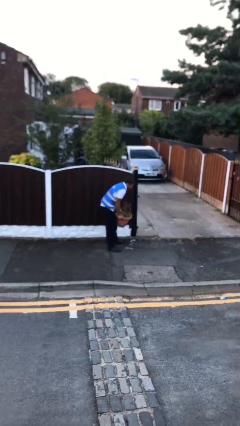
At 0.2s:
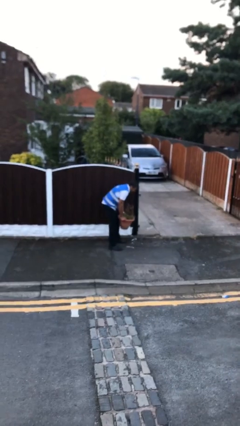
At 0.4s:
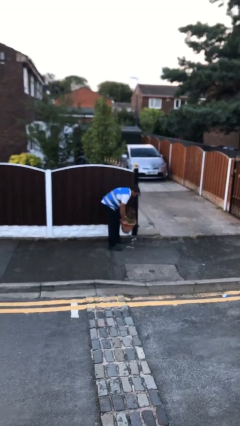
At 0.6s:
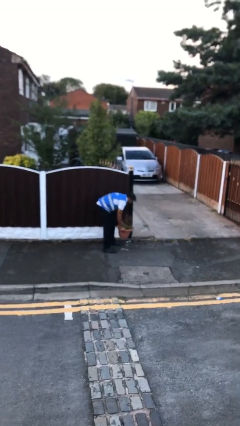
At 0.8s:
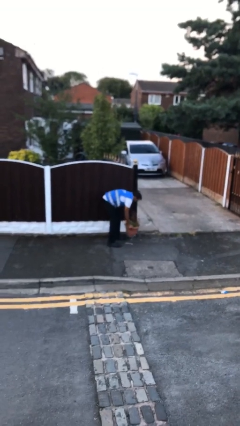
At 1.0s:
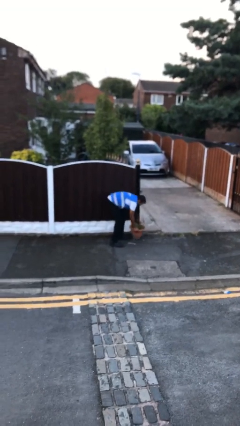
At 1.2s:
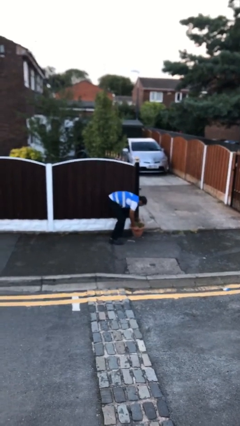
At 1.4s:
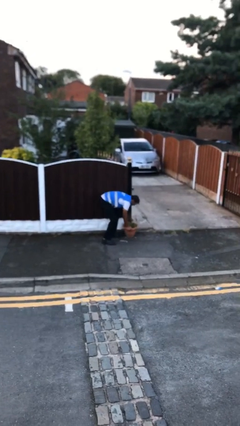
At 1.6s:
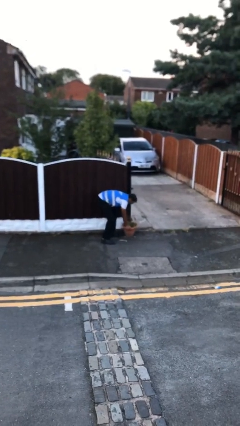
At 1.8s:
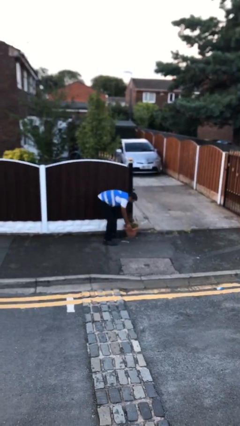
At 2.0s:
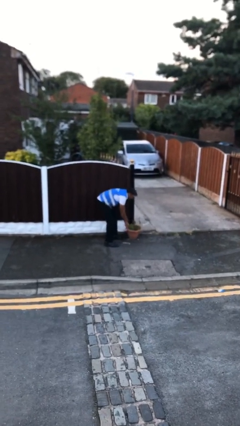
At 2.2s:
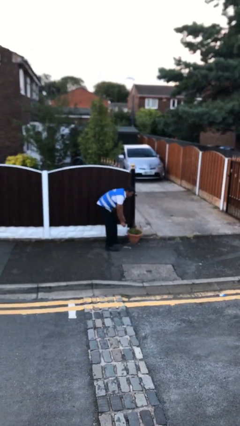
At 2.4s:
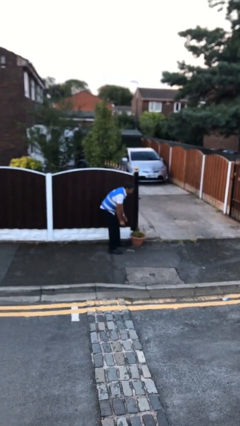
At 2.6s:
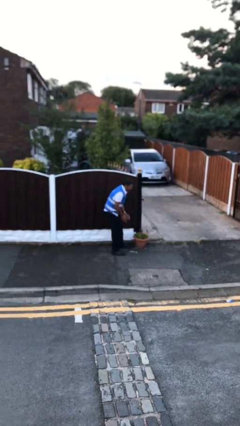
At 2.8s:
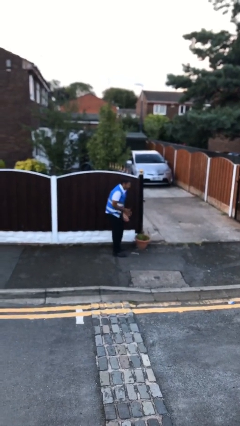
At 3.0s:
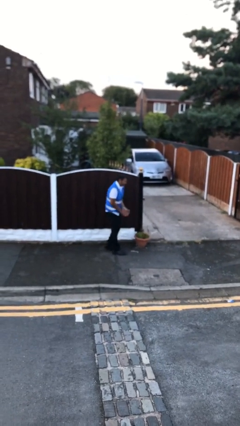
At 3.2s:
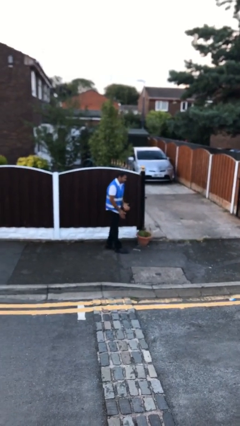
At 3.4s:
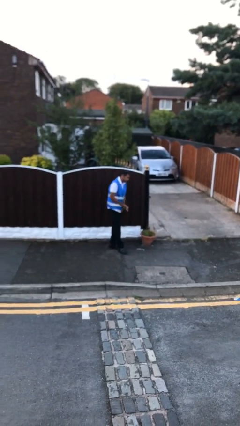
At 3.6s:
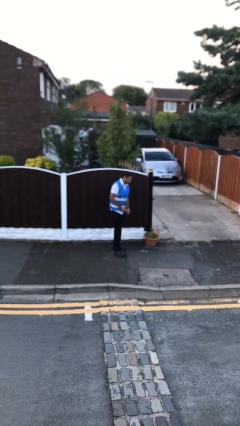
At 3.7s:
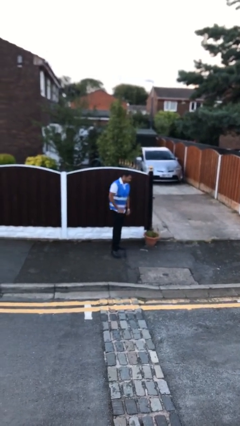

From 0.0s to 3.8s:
person puts down object on floor

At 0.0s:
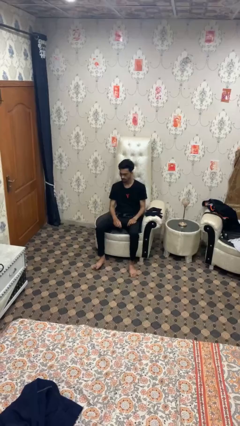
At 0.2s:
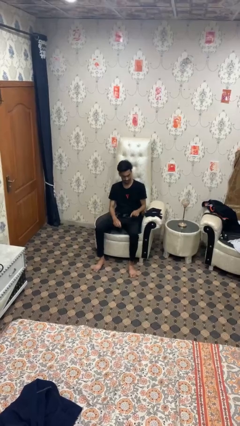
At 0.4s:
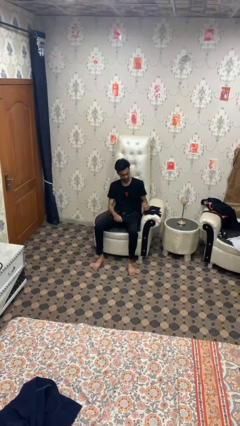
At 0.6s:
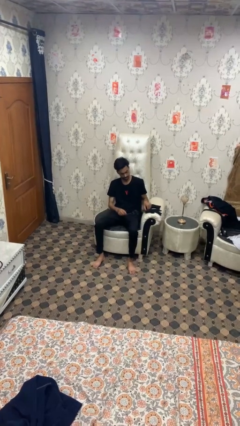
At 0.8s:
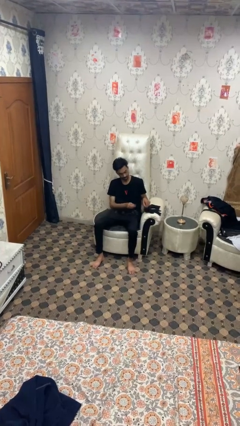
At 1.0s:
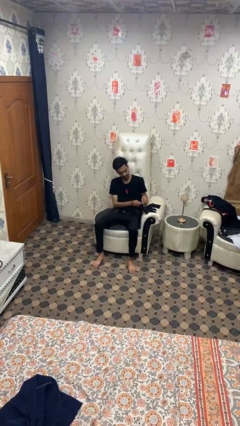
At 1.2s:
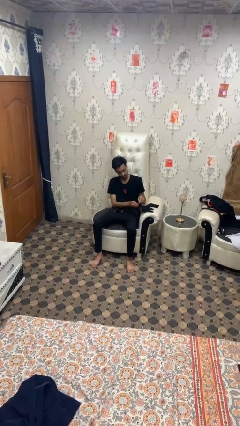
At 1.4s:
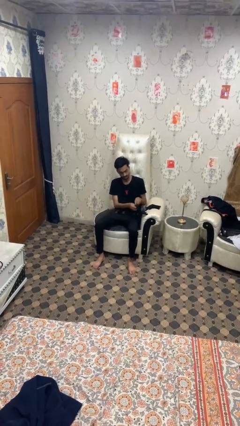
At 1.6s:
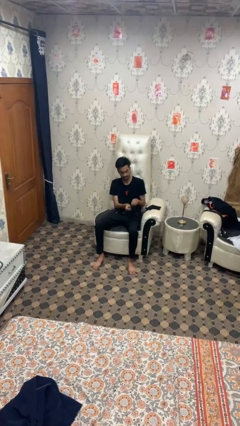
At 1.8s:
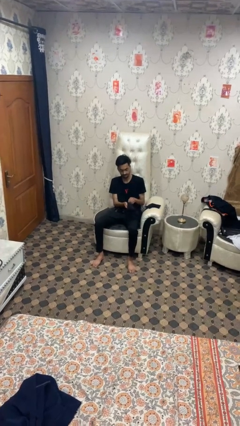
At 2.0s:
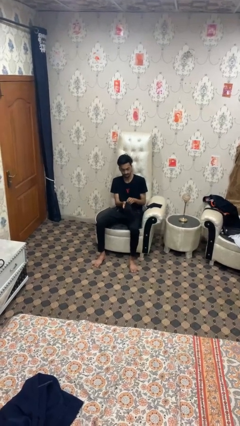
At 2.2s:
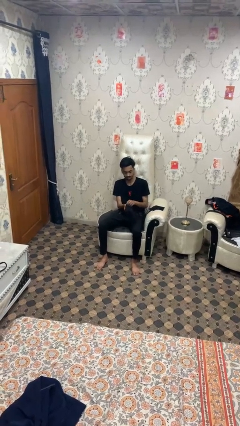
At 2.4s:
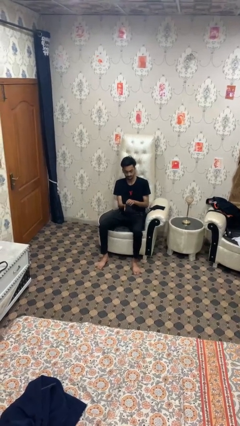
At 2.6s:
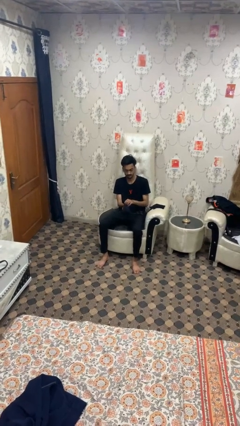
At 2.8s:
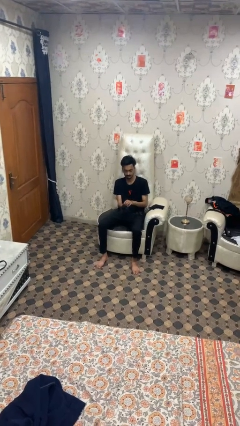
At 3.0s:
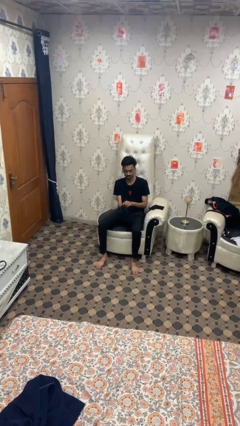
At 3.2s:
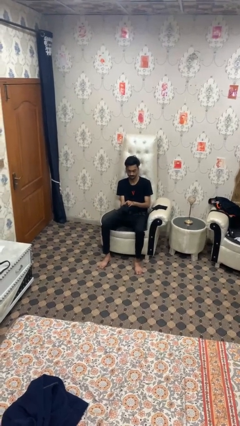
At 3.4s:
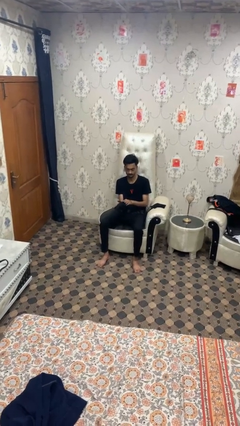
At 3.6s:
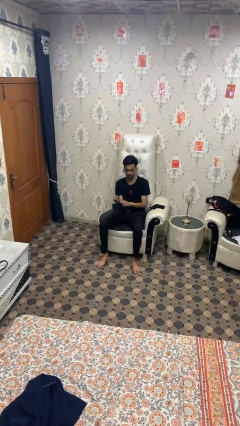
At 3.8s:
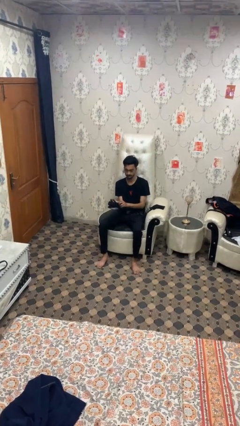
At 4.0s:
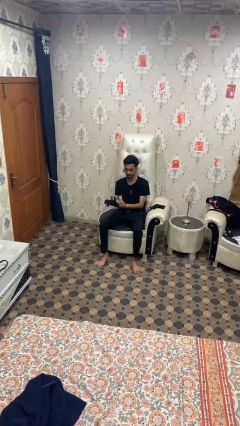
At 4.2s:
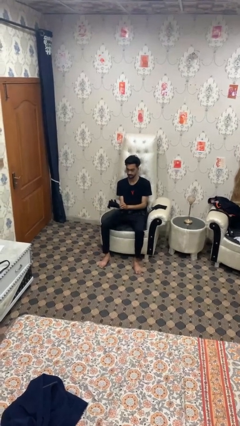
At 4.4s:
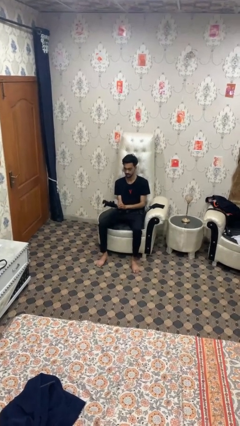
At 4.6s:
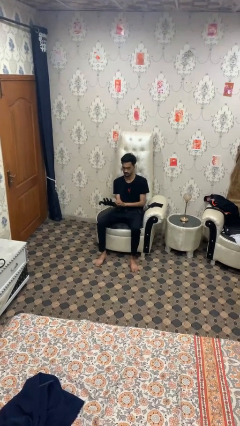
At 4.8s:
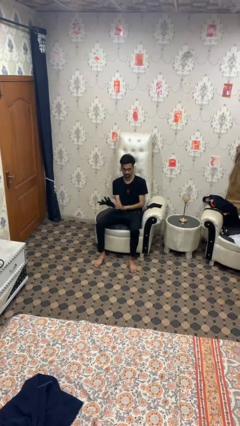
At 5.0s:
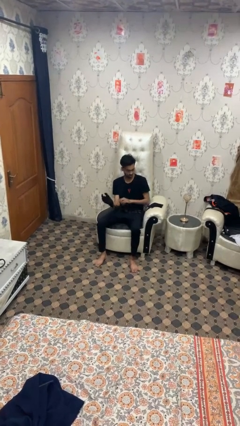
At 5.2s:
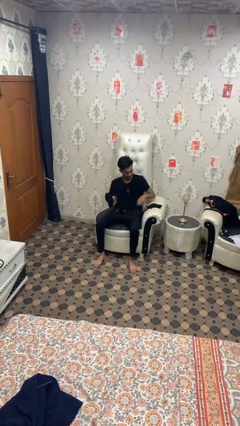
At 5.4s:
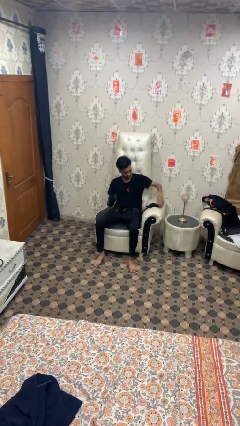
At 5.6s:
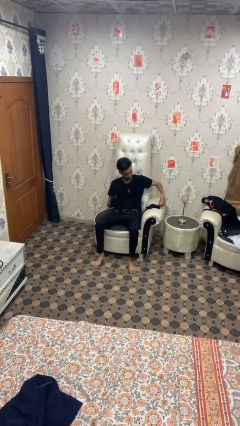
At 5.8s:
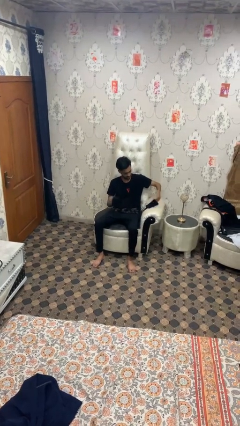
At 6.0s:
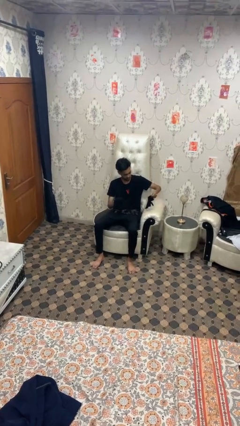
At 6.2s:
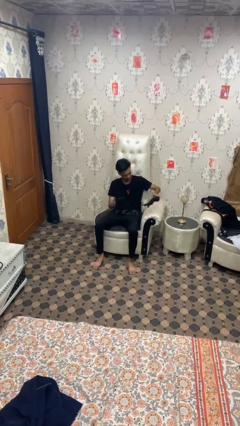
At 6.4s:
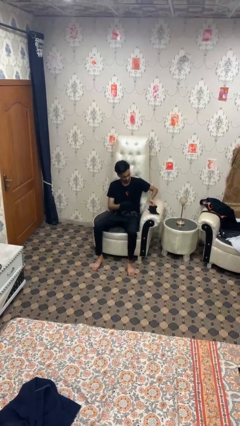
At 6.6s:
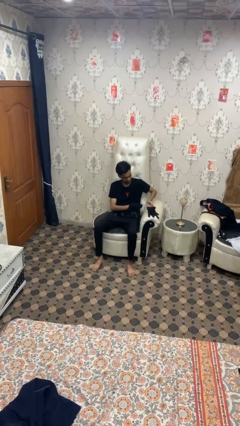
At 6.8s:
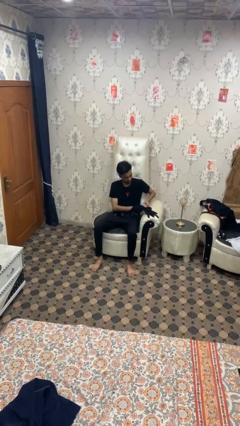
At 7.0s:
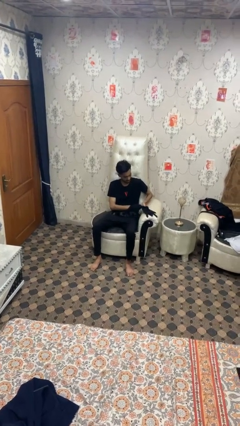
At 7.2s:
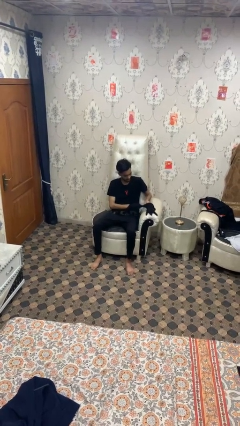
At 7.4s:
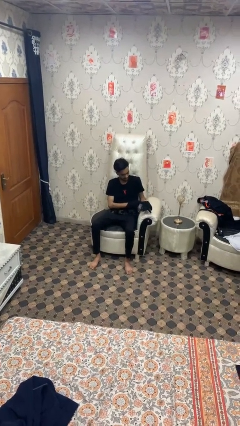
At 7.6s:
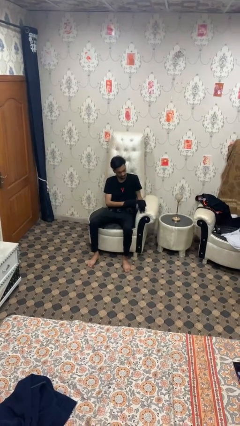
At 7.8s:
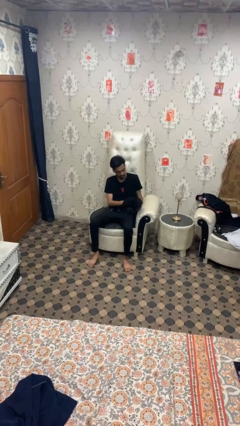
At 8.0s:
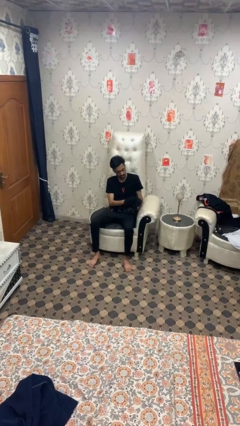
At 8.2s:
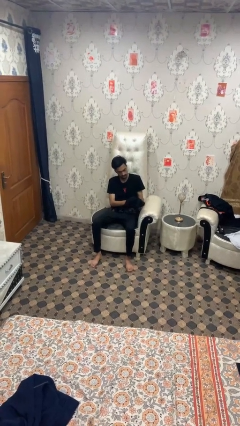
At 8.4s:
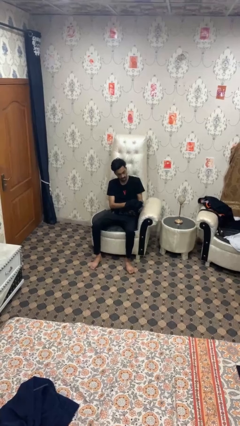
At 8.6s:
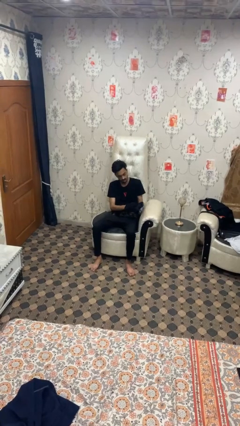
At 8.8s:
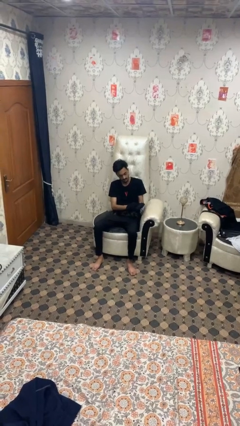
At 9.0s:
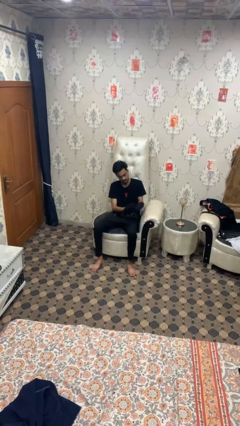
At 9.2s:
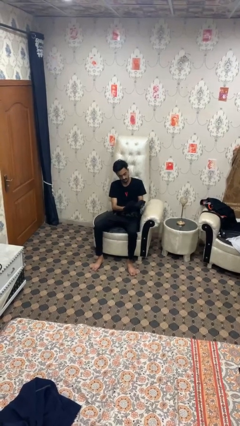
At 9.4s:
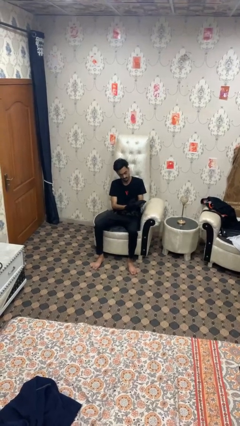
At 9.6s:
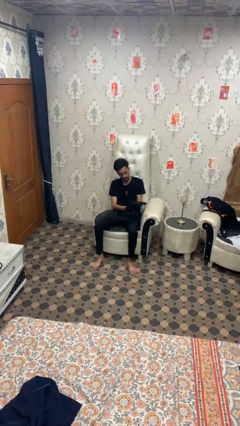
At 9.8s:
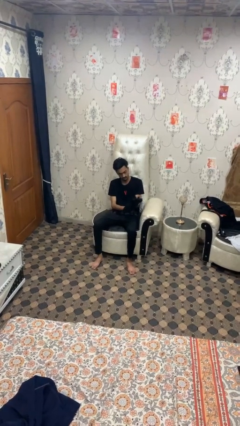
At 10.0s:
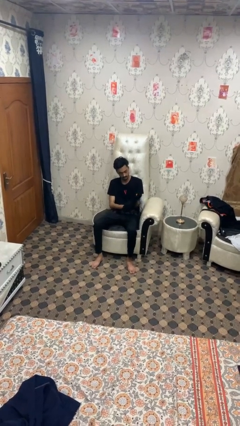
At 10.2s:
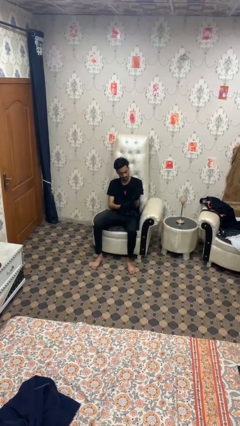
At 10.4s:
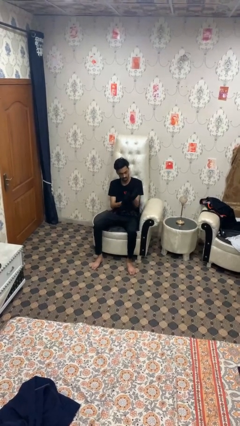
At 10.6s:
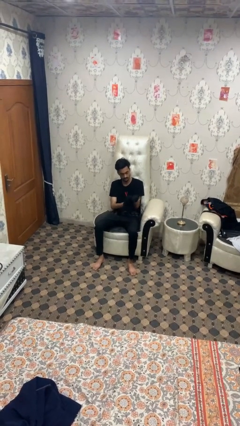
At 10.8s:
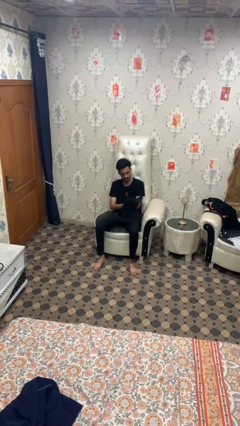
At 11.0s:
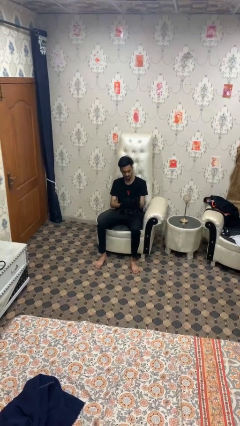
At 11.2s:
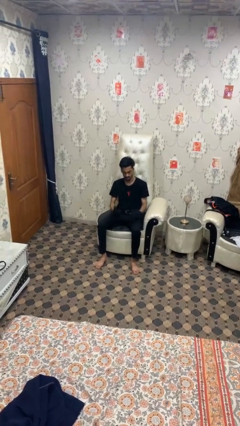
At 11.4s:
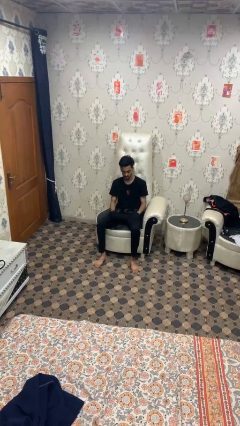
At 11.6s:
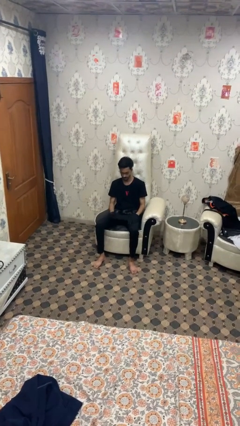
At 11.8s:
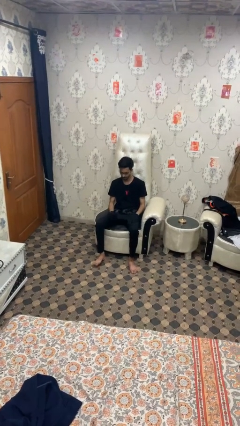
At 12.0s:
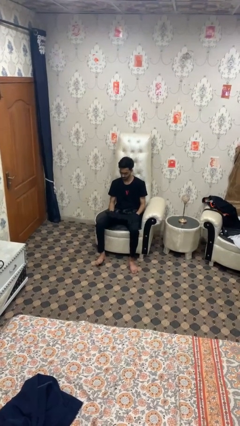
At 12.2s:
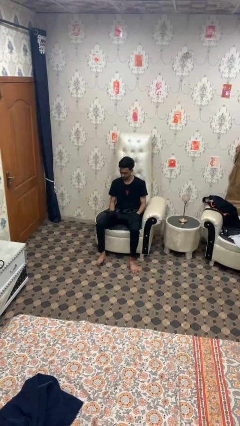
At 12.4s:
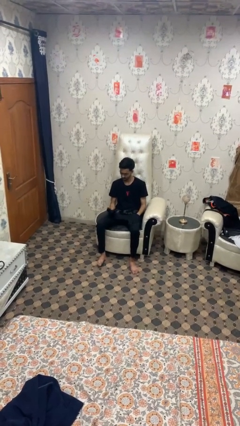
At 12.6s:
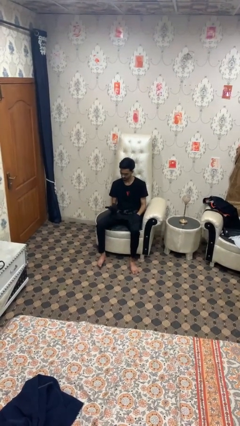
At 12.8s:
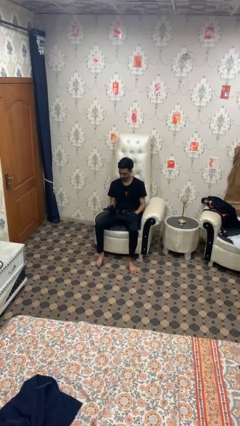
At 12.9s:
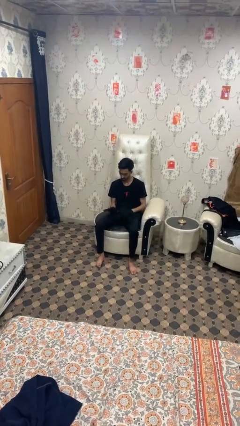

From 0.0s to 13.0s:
person puts on gloves

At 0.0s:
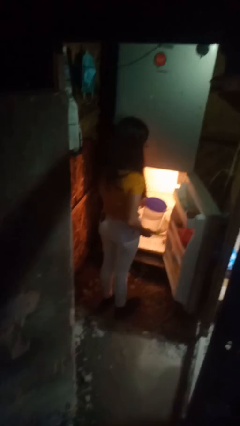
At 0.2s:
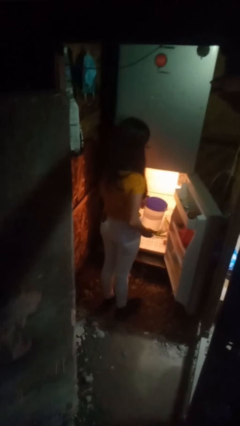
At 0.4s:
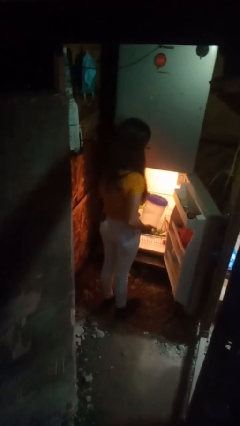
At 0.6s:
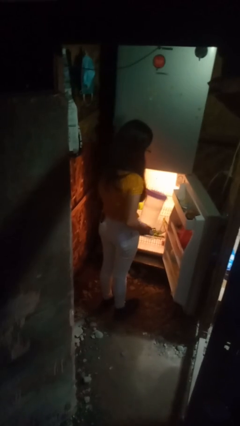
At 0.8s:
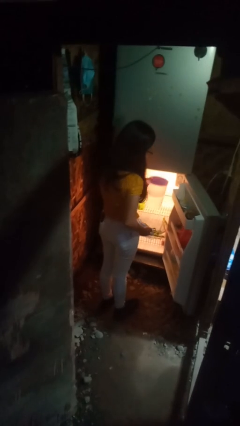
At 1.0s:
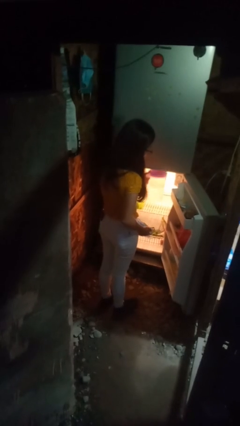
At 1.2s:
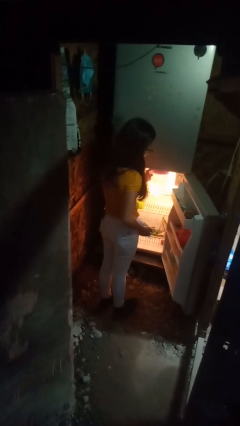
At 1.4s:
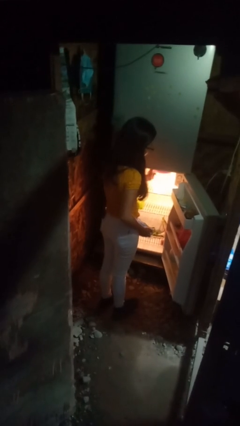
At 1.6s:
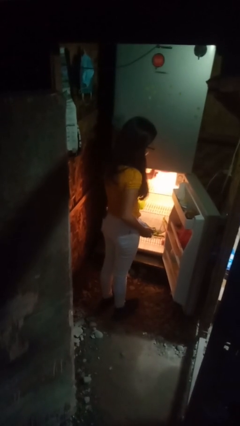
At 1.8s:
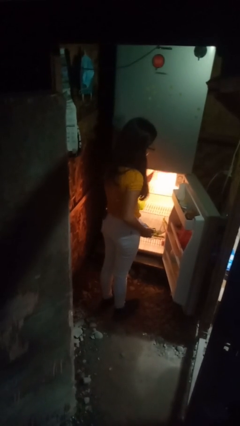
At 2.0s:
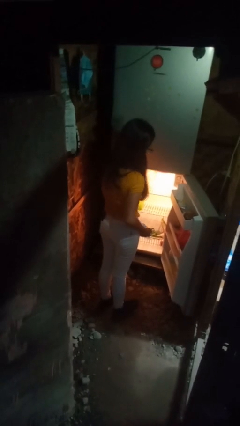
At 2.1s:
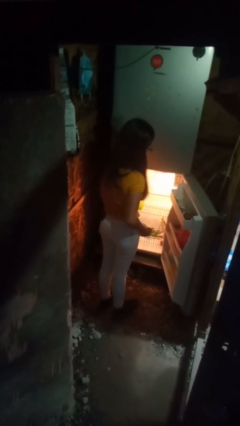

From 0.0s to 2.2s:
person puts object into refrigerator
